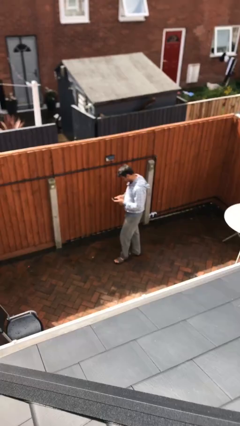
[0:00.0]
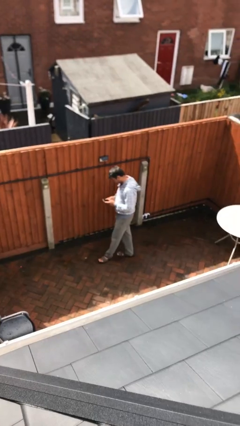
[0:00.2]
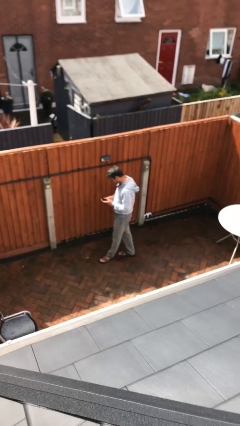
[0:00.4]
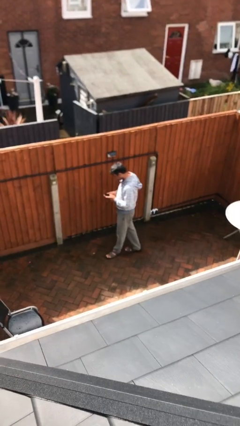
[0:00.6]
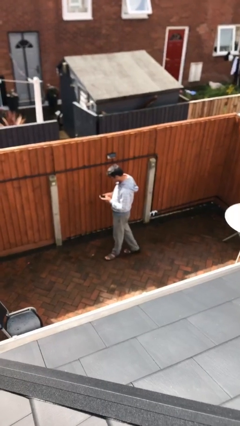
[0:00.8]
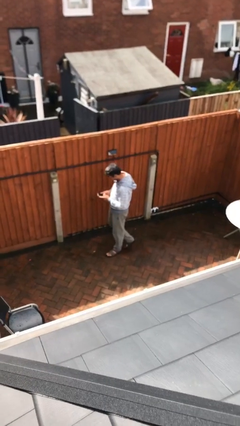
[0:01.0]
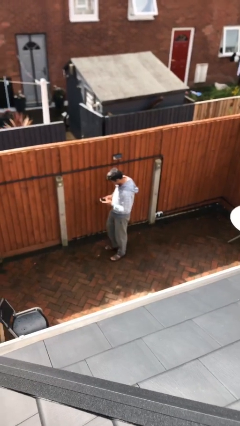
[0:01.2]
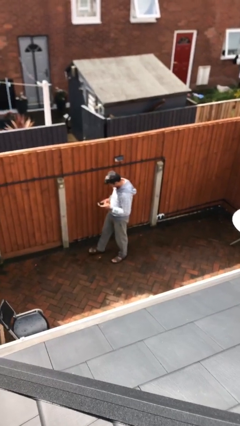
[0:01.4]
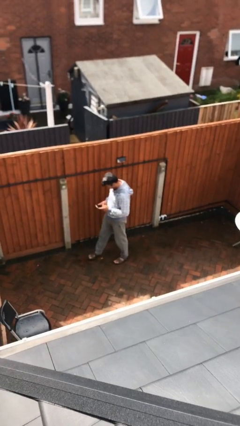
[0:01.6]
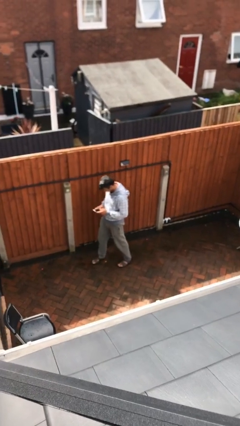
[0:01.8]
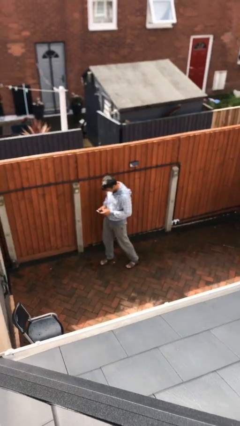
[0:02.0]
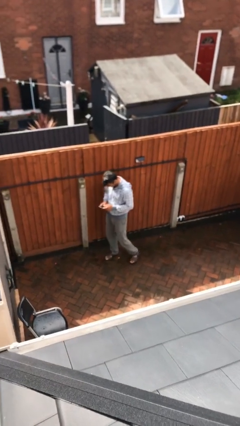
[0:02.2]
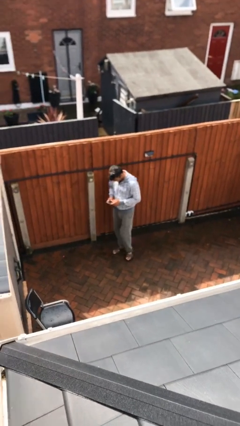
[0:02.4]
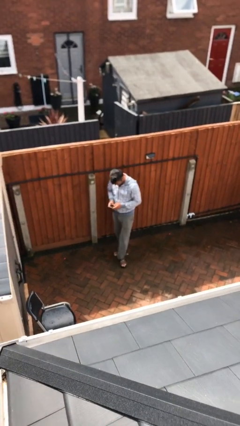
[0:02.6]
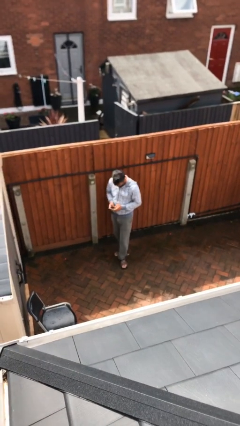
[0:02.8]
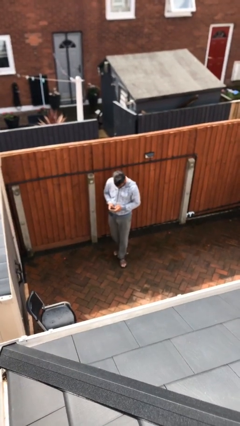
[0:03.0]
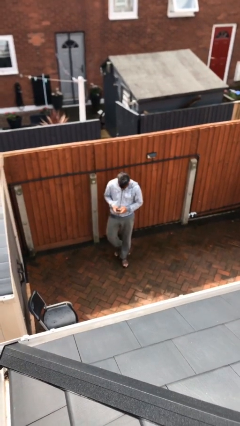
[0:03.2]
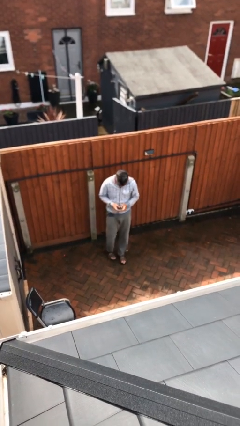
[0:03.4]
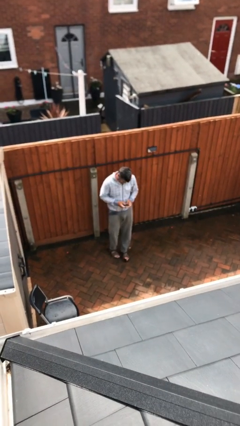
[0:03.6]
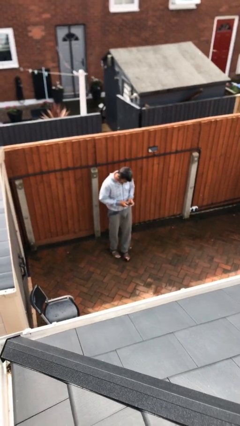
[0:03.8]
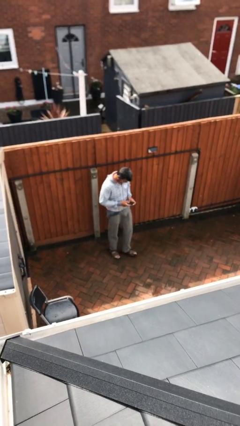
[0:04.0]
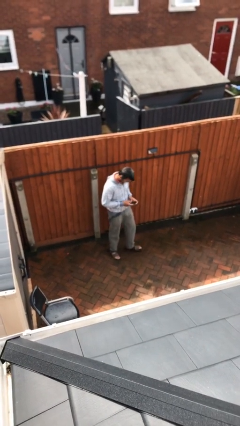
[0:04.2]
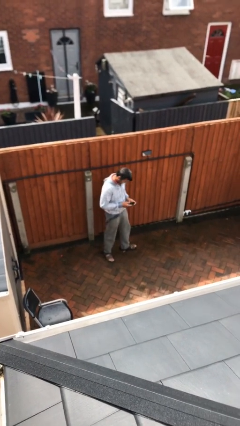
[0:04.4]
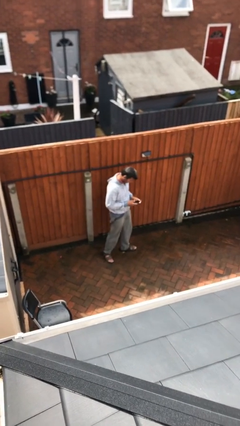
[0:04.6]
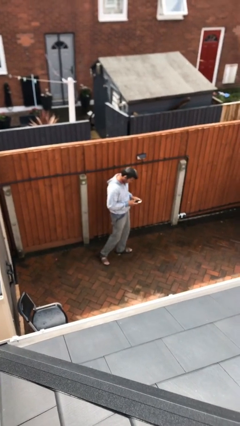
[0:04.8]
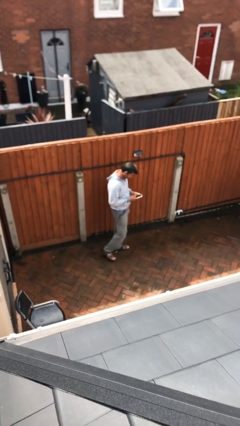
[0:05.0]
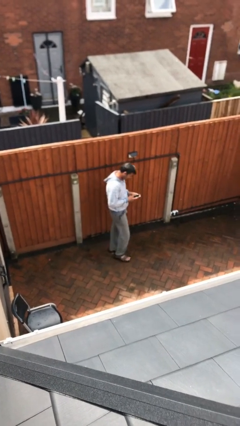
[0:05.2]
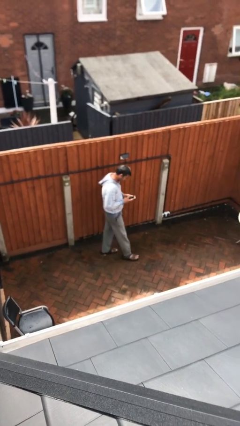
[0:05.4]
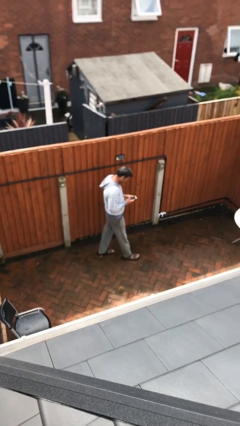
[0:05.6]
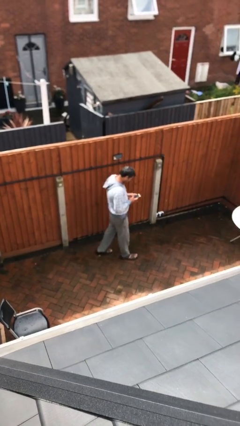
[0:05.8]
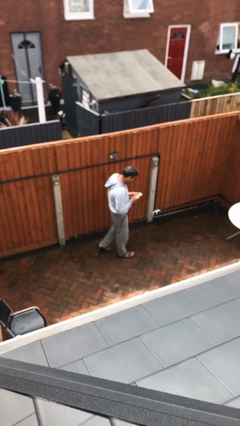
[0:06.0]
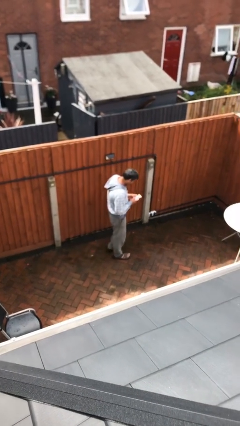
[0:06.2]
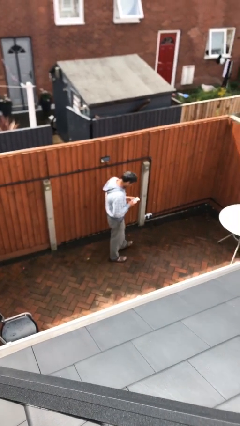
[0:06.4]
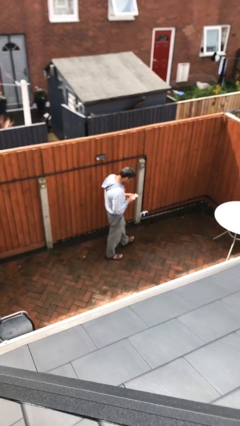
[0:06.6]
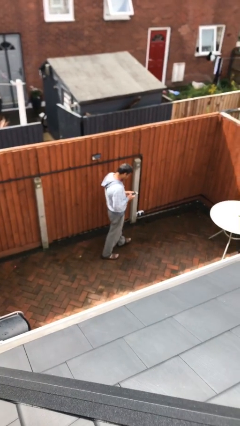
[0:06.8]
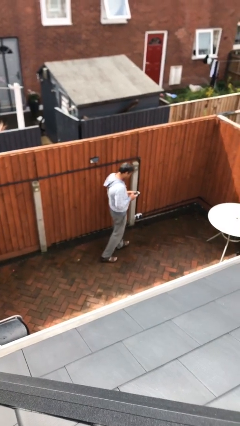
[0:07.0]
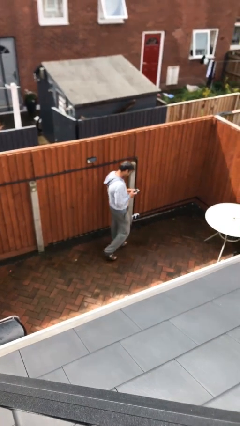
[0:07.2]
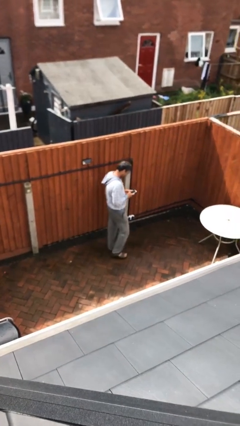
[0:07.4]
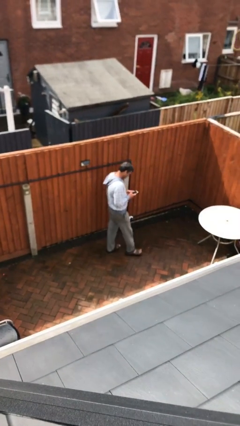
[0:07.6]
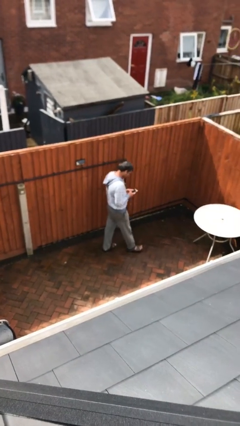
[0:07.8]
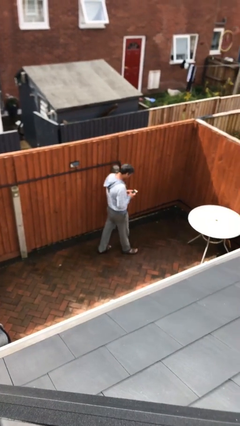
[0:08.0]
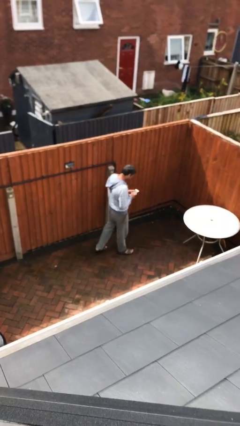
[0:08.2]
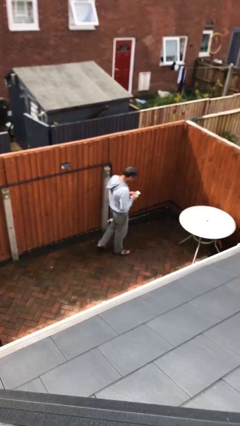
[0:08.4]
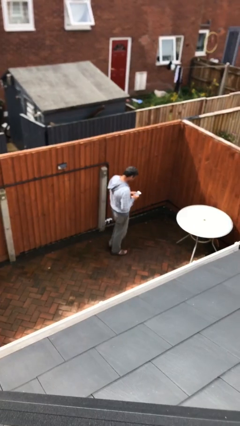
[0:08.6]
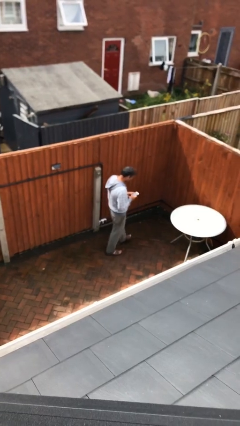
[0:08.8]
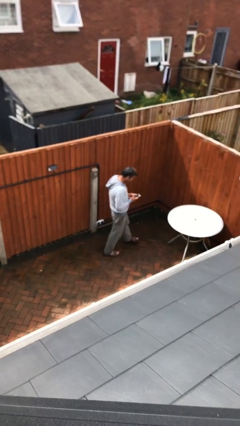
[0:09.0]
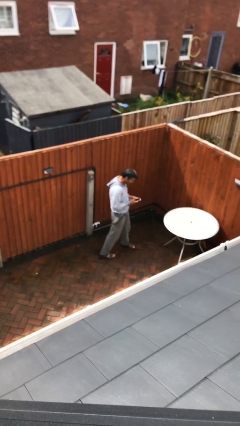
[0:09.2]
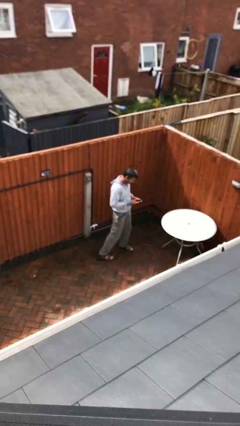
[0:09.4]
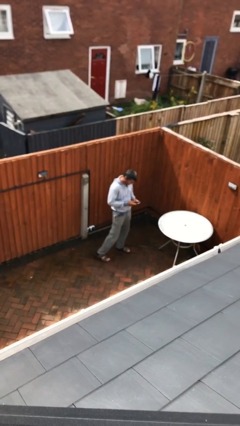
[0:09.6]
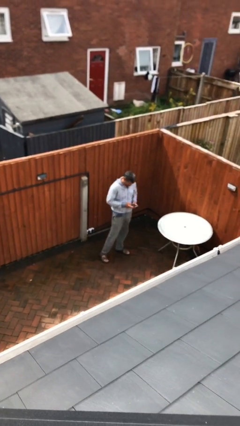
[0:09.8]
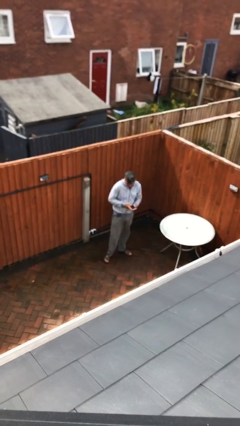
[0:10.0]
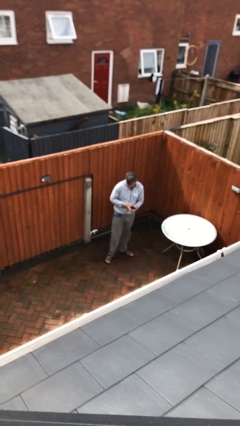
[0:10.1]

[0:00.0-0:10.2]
person texts on phone

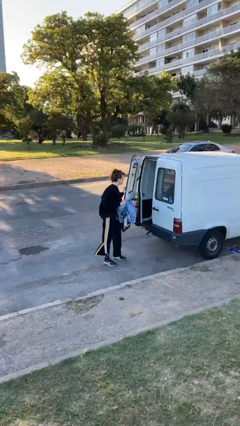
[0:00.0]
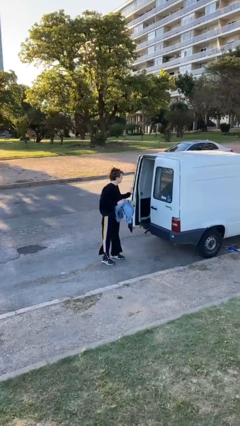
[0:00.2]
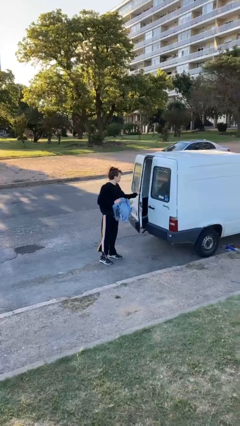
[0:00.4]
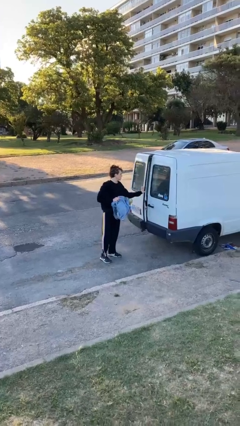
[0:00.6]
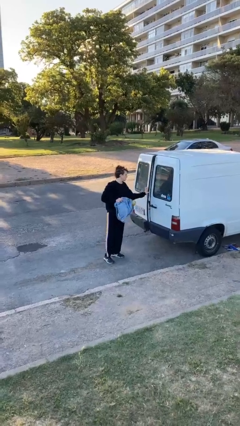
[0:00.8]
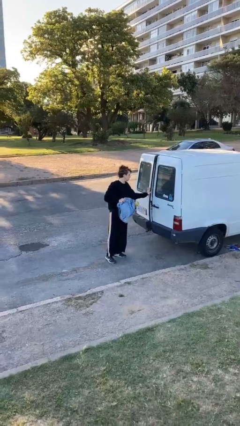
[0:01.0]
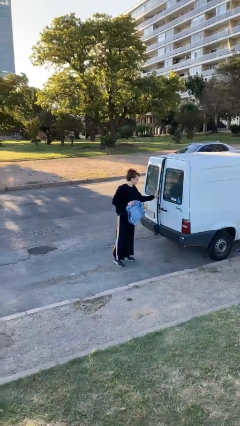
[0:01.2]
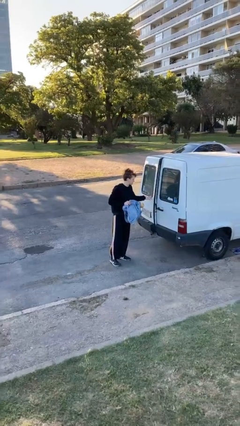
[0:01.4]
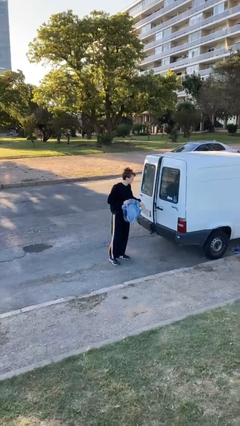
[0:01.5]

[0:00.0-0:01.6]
person closes car door

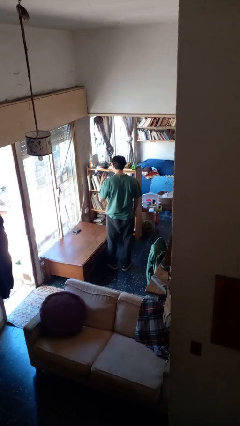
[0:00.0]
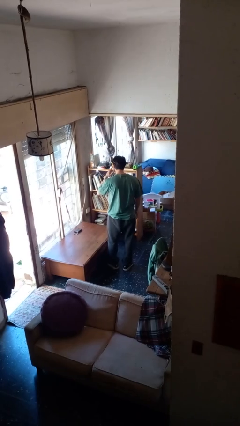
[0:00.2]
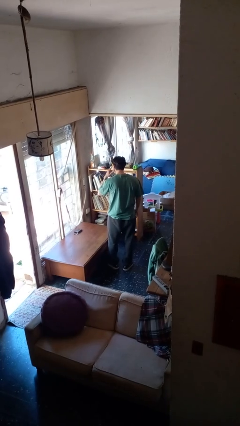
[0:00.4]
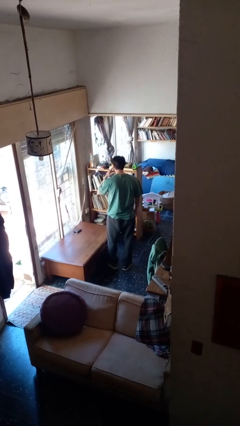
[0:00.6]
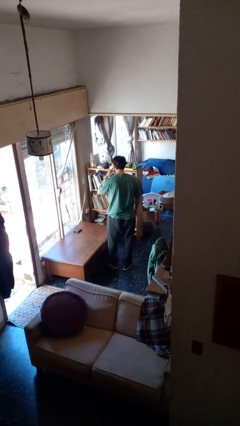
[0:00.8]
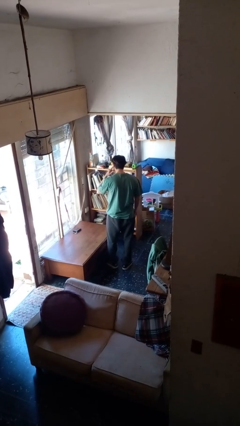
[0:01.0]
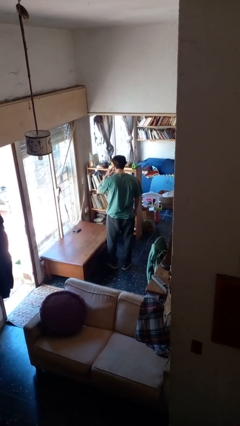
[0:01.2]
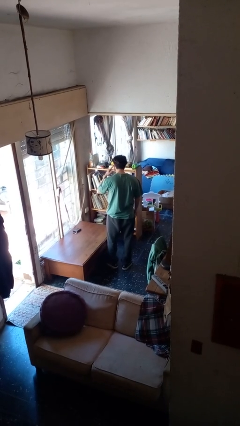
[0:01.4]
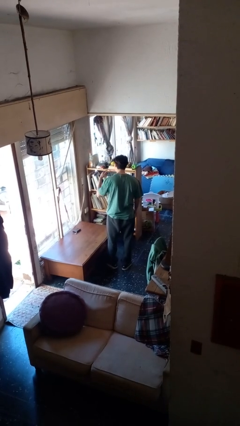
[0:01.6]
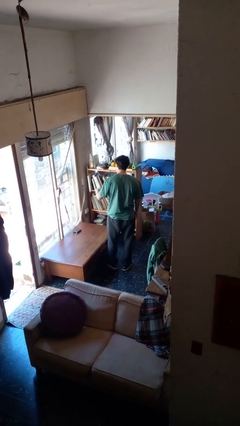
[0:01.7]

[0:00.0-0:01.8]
person gestures listen closely

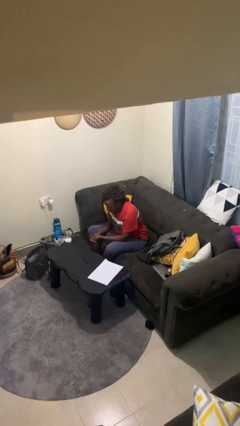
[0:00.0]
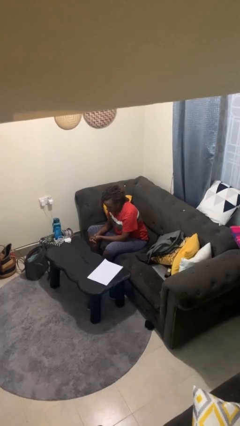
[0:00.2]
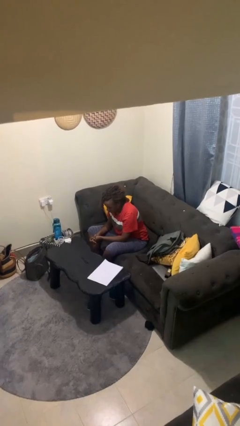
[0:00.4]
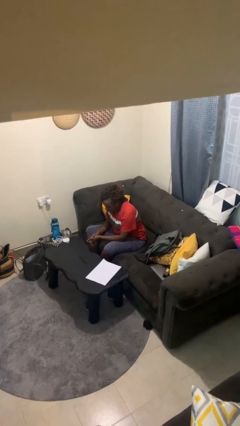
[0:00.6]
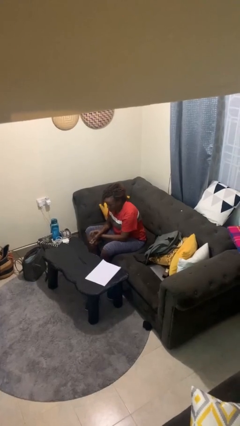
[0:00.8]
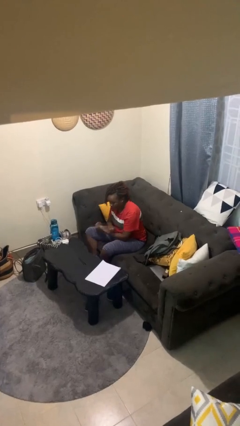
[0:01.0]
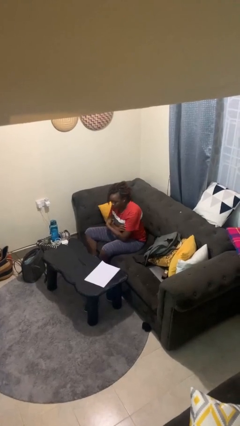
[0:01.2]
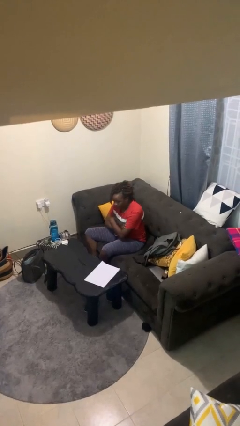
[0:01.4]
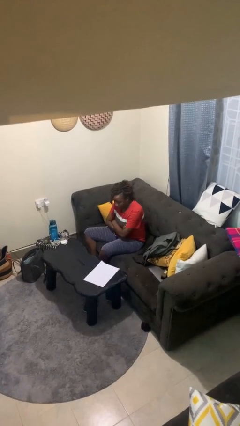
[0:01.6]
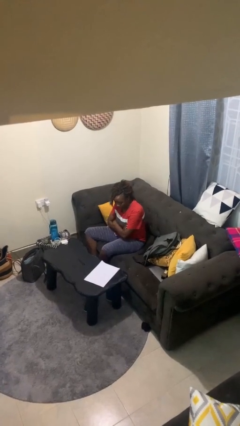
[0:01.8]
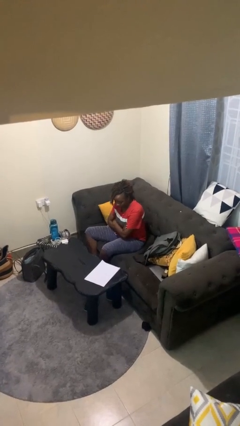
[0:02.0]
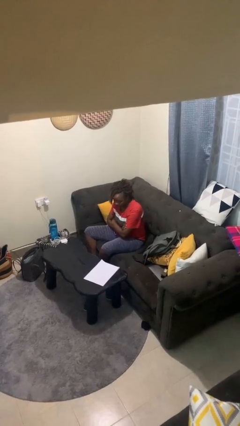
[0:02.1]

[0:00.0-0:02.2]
person crosses arms

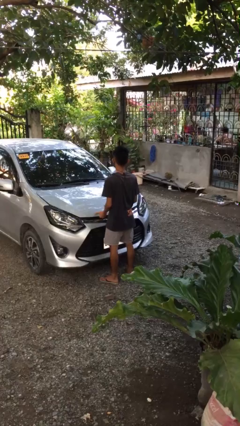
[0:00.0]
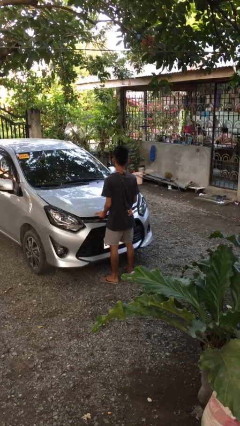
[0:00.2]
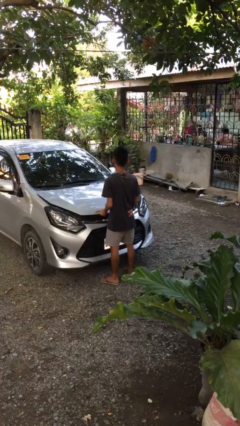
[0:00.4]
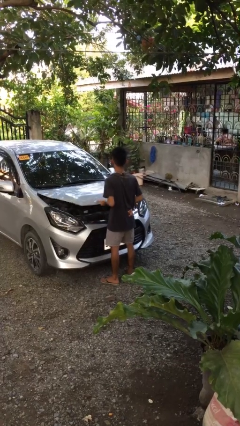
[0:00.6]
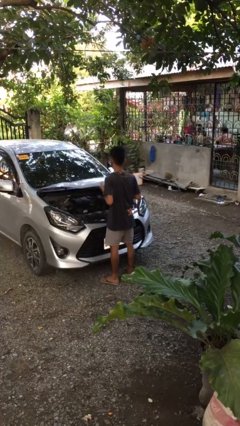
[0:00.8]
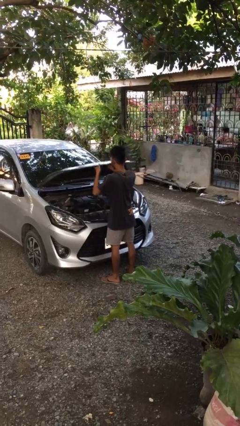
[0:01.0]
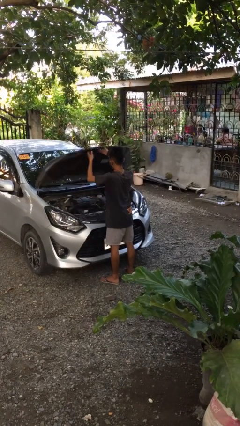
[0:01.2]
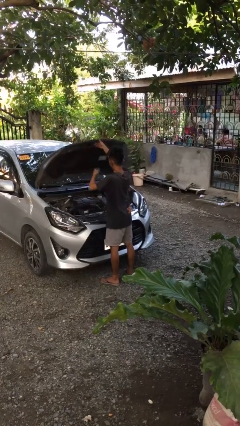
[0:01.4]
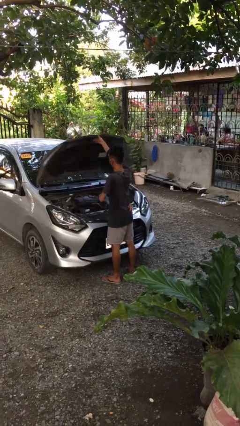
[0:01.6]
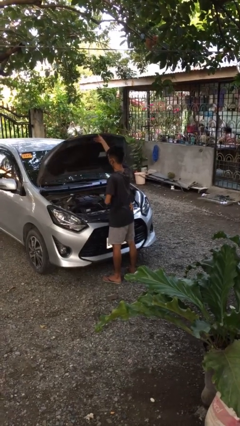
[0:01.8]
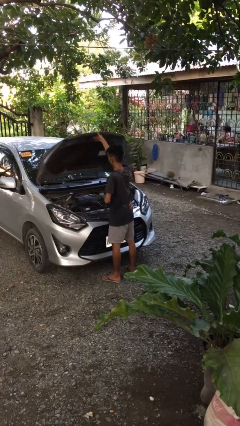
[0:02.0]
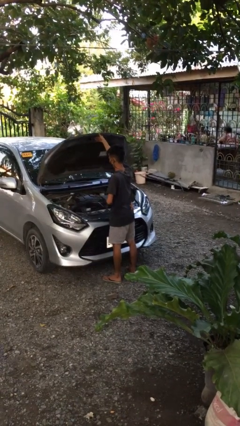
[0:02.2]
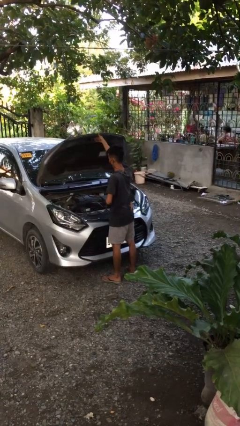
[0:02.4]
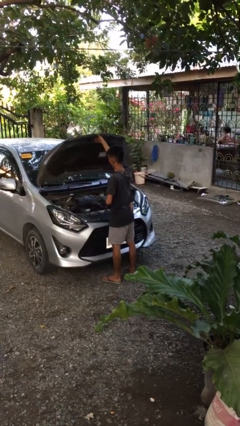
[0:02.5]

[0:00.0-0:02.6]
person opens car hood
